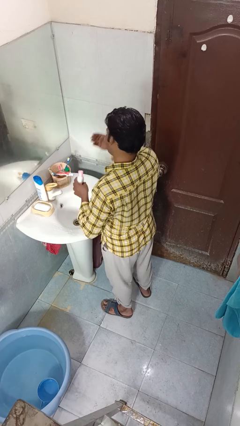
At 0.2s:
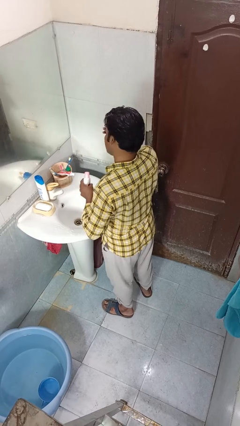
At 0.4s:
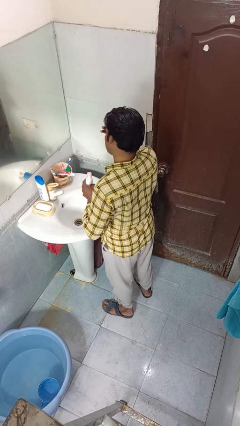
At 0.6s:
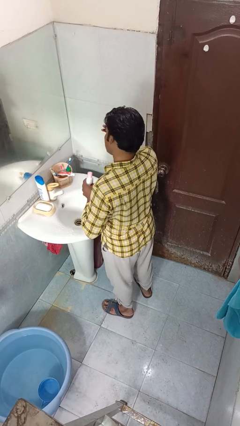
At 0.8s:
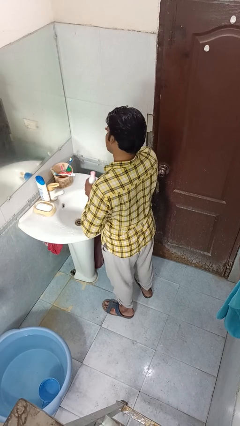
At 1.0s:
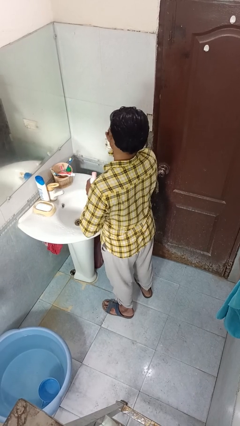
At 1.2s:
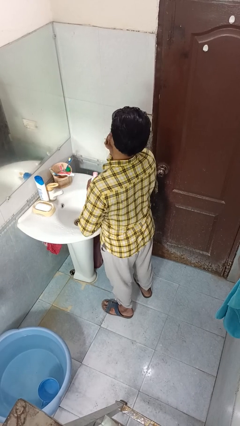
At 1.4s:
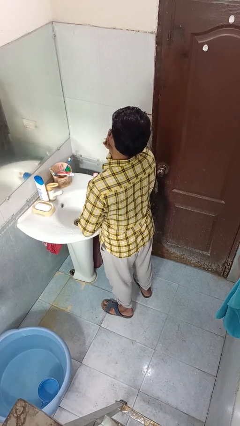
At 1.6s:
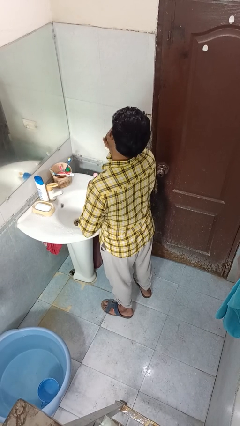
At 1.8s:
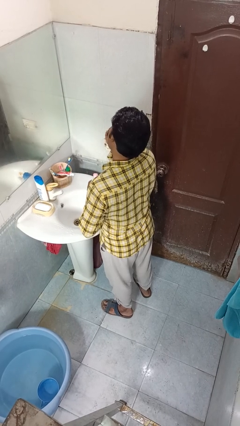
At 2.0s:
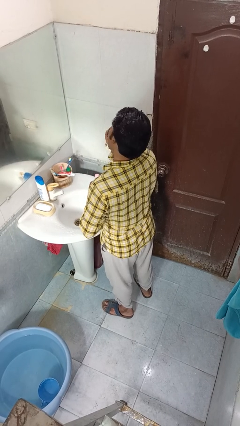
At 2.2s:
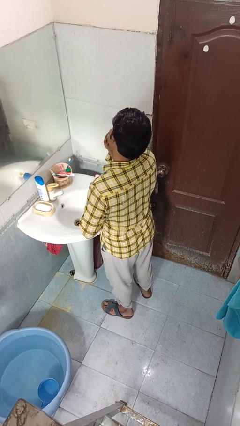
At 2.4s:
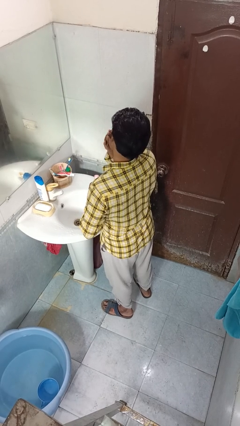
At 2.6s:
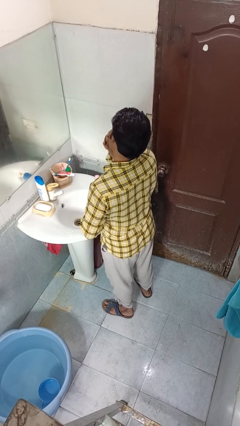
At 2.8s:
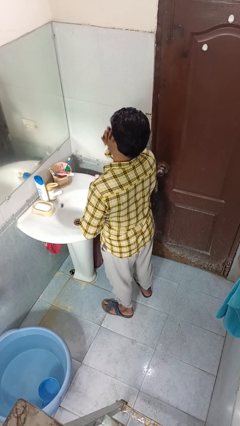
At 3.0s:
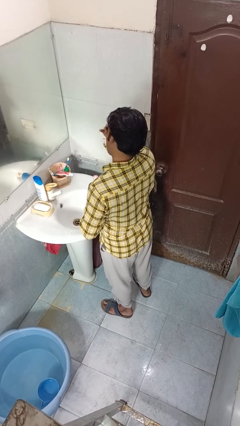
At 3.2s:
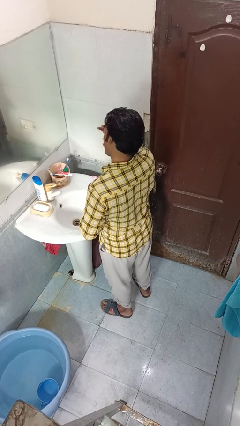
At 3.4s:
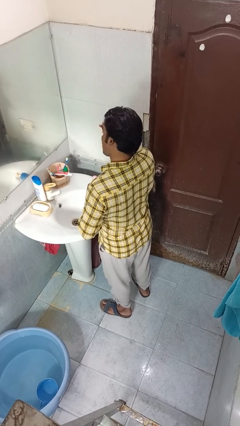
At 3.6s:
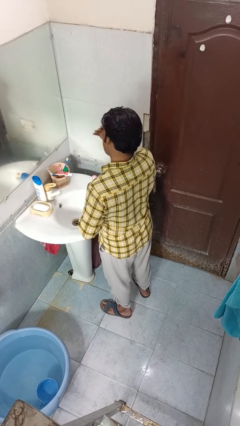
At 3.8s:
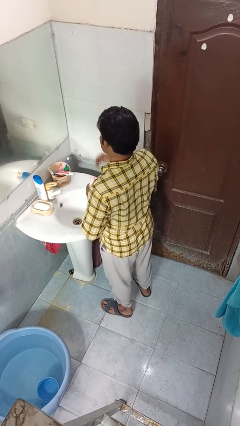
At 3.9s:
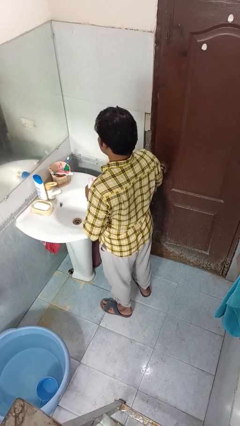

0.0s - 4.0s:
person applies facial moisturizer

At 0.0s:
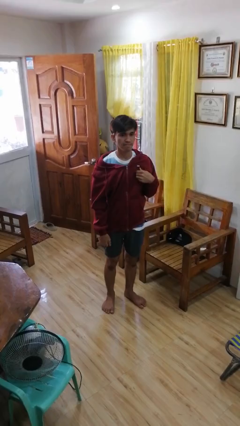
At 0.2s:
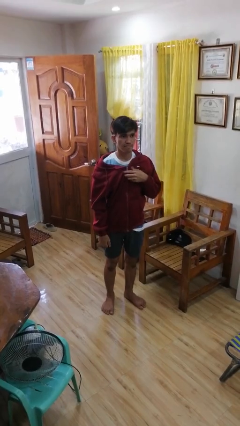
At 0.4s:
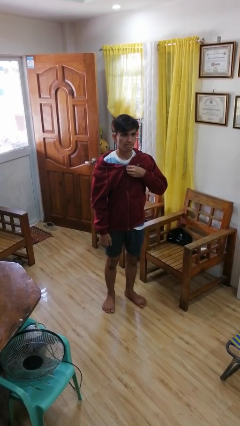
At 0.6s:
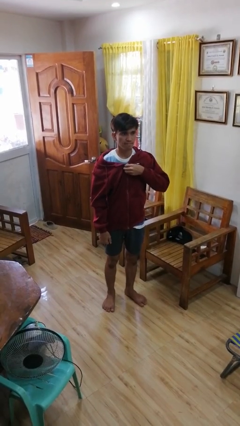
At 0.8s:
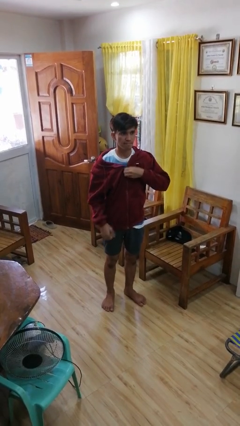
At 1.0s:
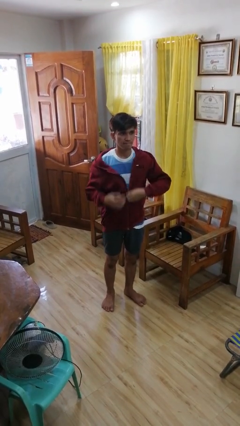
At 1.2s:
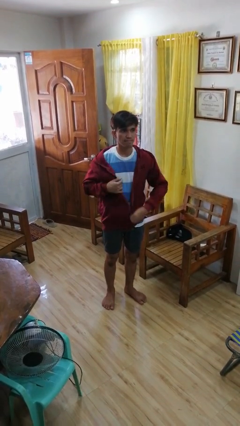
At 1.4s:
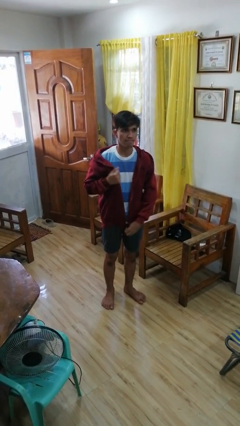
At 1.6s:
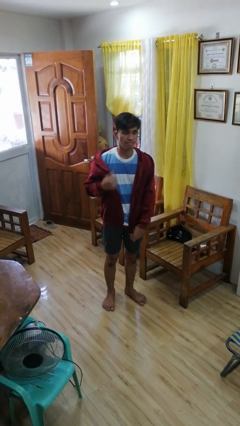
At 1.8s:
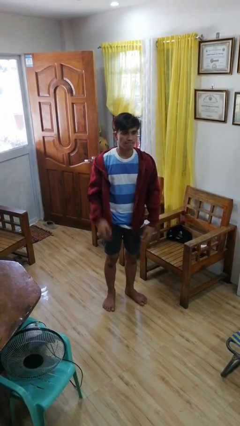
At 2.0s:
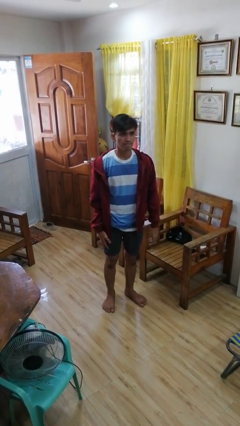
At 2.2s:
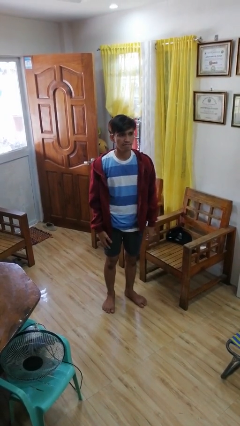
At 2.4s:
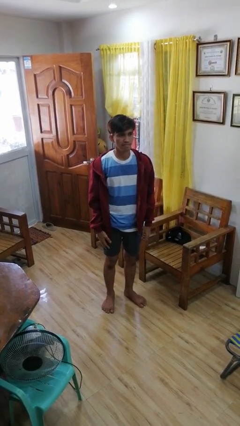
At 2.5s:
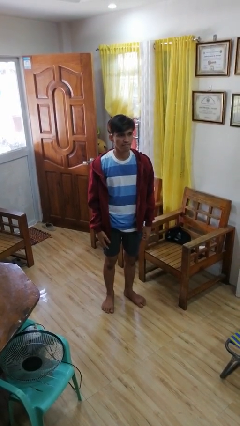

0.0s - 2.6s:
person unzips jacket

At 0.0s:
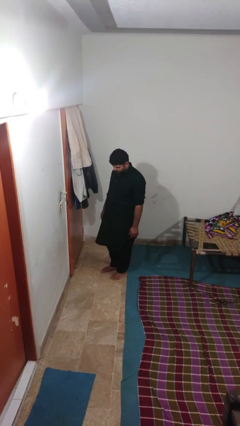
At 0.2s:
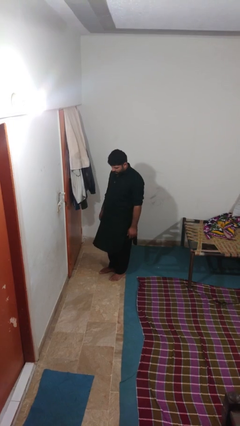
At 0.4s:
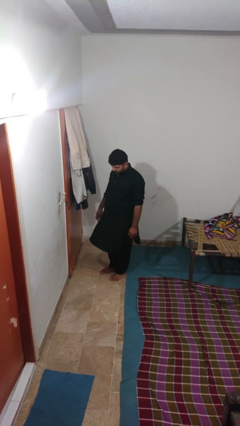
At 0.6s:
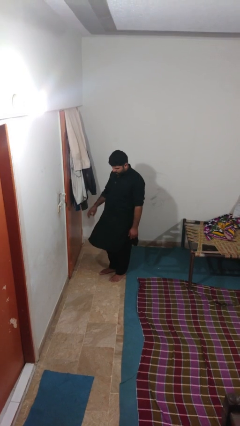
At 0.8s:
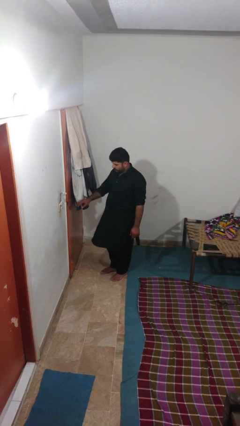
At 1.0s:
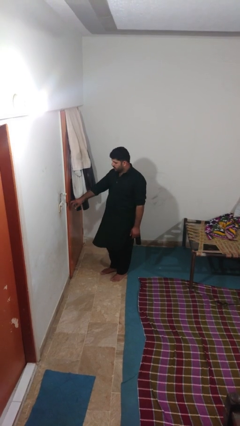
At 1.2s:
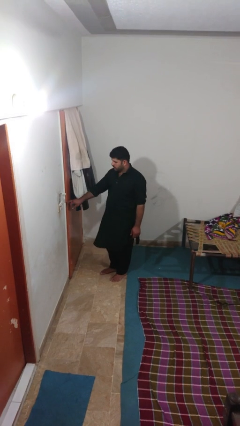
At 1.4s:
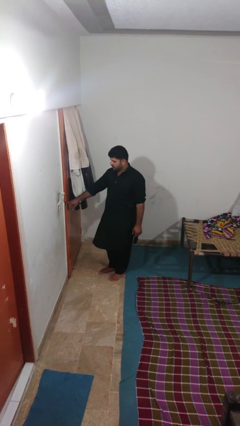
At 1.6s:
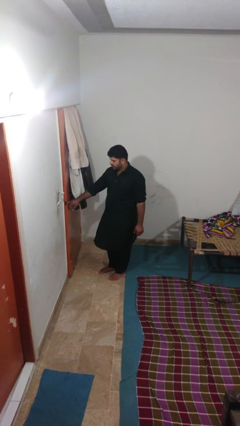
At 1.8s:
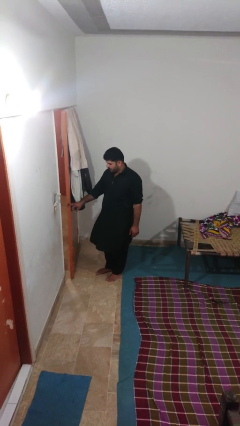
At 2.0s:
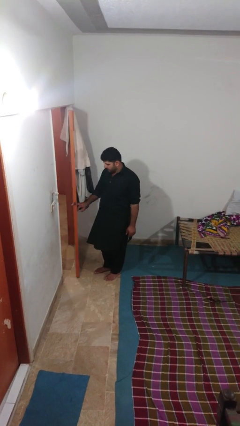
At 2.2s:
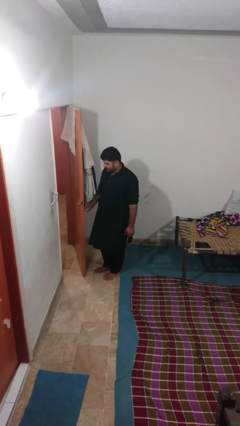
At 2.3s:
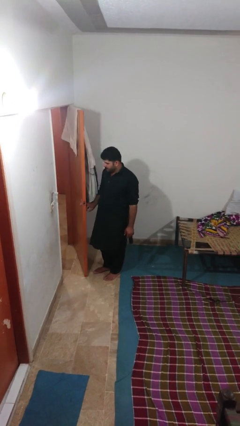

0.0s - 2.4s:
person opens facility door

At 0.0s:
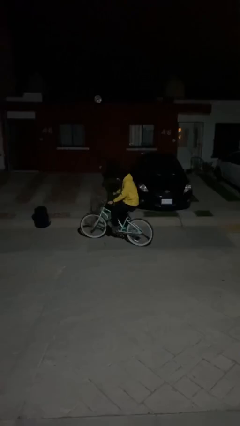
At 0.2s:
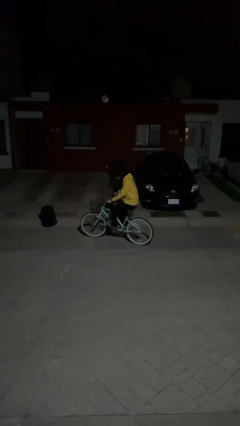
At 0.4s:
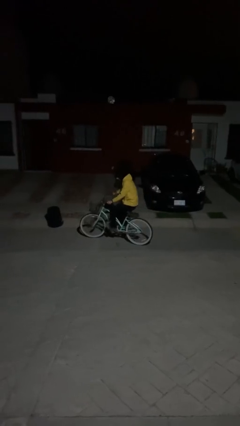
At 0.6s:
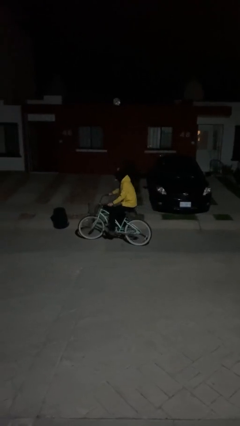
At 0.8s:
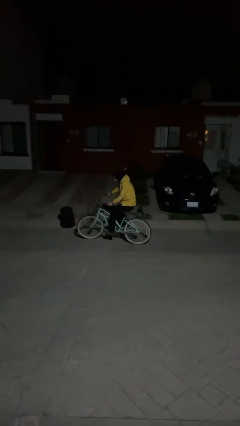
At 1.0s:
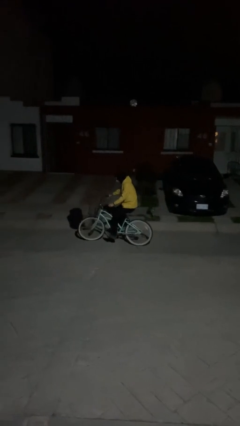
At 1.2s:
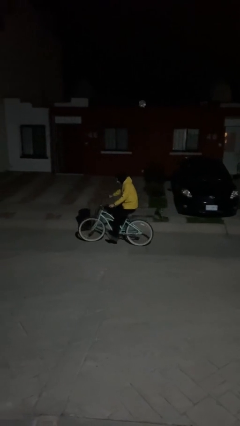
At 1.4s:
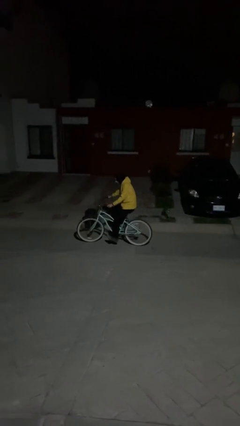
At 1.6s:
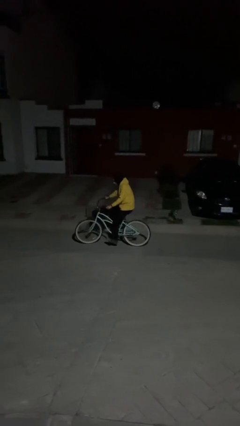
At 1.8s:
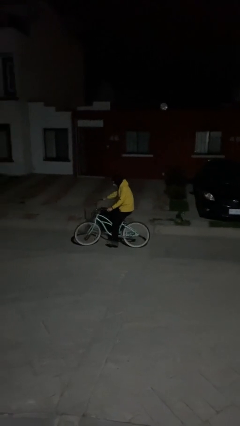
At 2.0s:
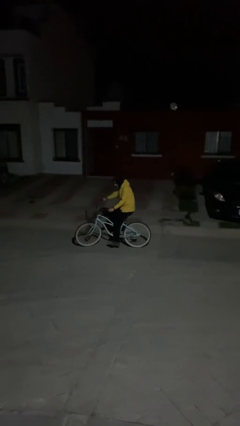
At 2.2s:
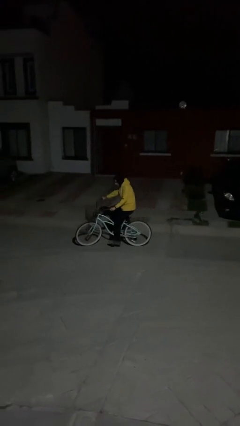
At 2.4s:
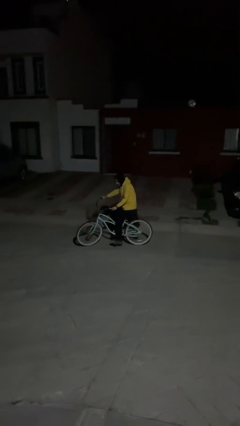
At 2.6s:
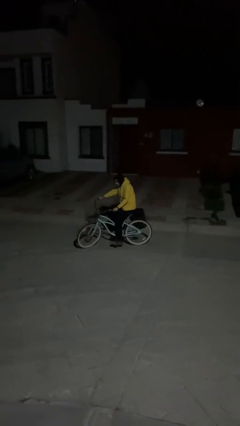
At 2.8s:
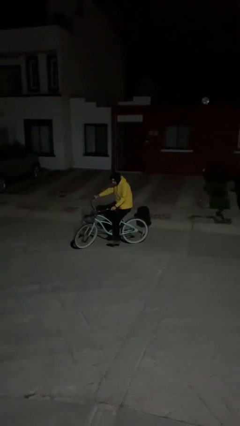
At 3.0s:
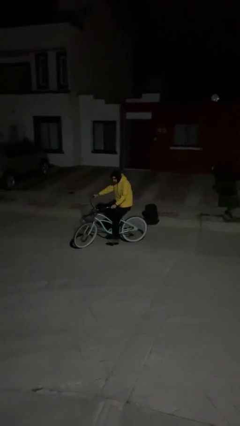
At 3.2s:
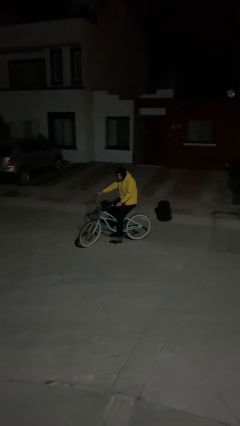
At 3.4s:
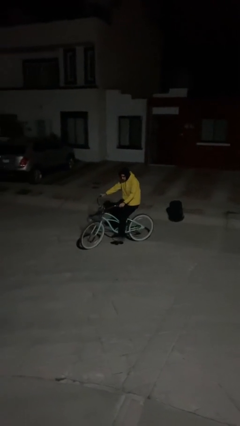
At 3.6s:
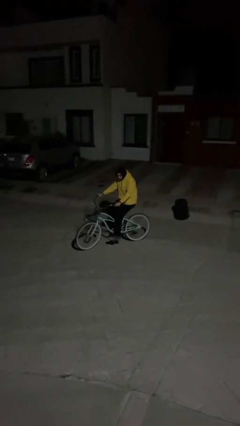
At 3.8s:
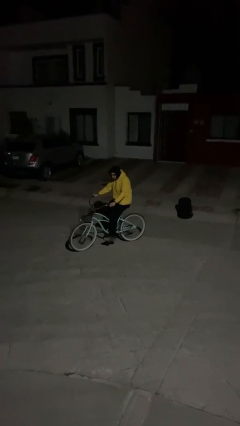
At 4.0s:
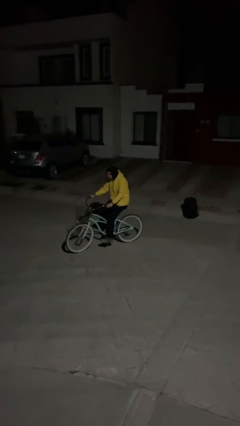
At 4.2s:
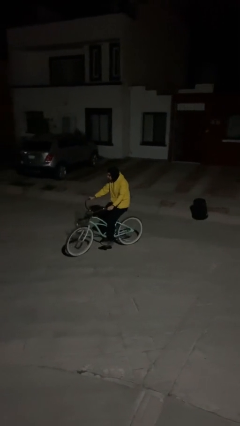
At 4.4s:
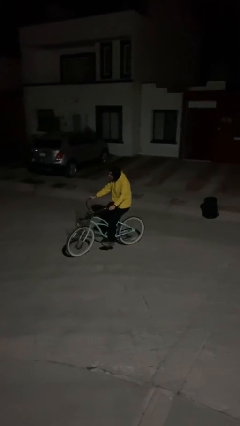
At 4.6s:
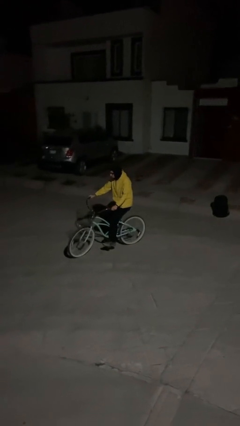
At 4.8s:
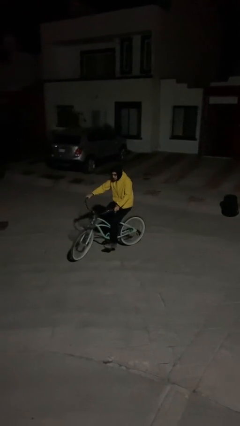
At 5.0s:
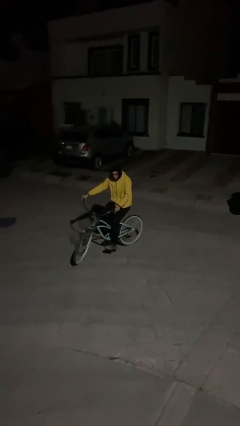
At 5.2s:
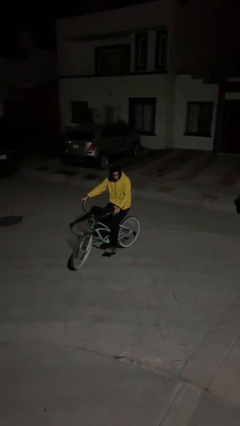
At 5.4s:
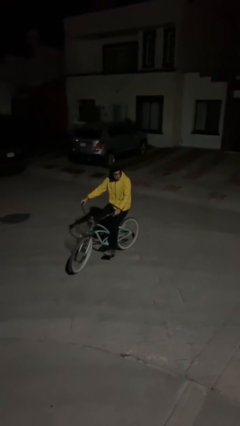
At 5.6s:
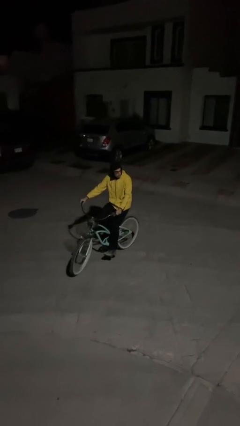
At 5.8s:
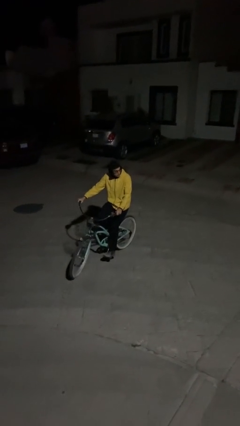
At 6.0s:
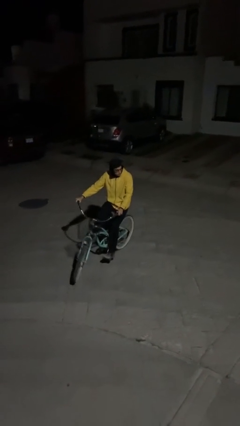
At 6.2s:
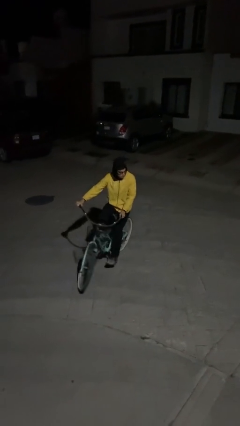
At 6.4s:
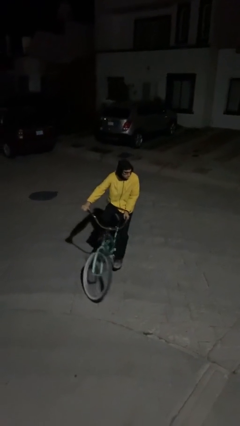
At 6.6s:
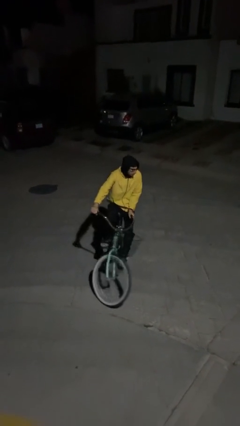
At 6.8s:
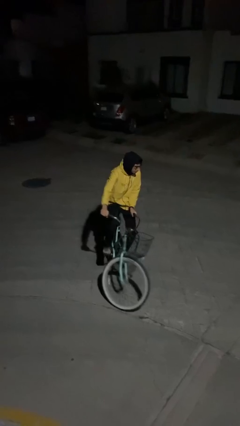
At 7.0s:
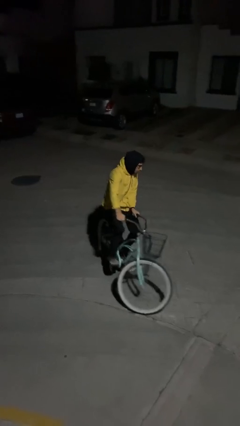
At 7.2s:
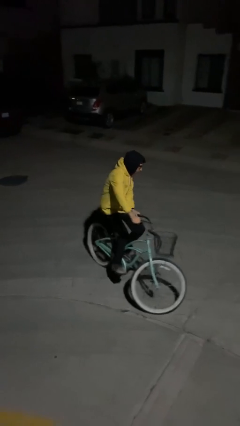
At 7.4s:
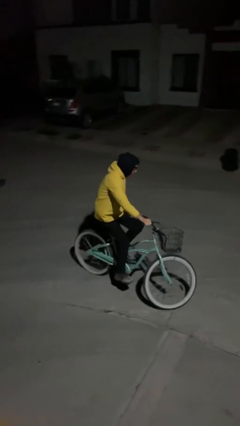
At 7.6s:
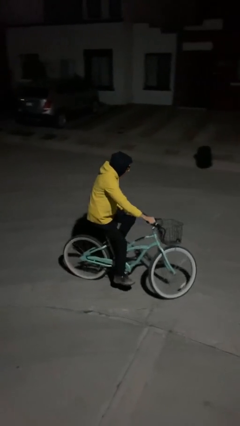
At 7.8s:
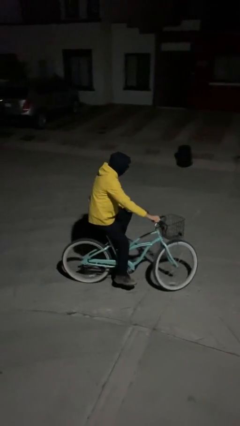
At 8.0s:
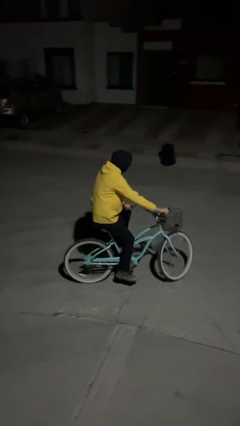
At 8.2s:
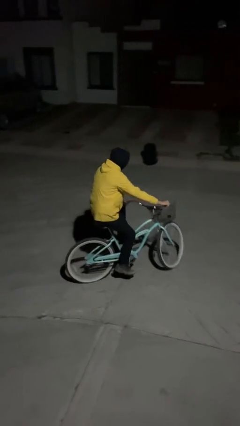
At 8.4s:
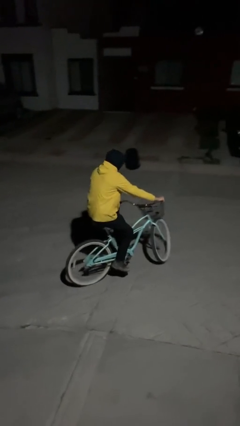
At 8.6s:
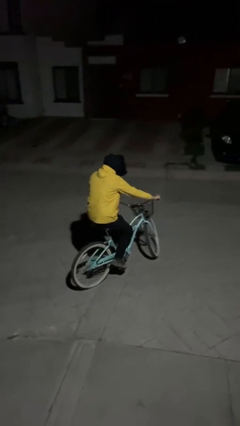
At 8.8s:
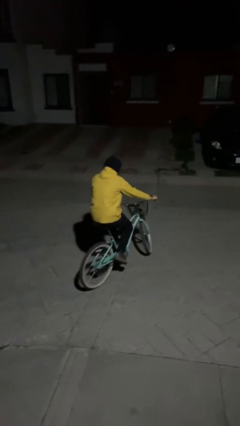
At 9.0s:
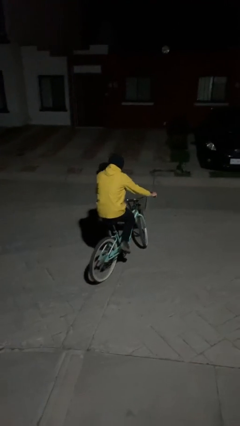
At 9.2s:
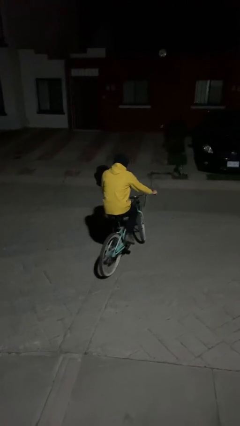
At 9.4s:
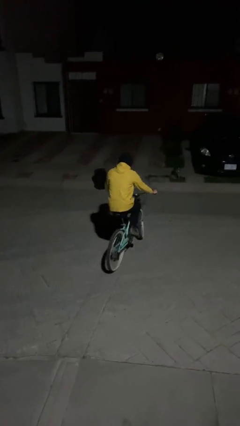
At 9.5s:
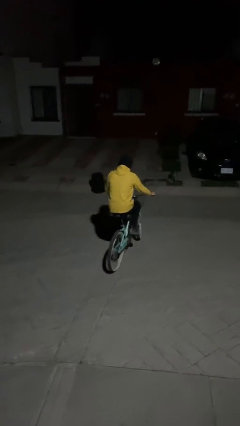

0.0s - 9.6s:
person rides bicycle
